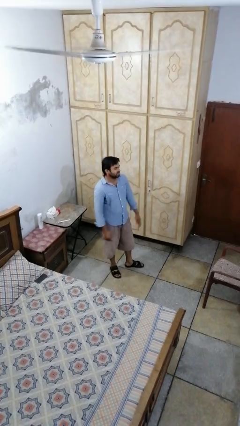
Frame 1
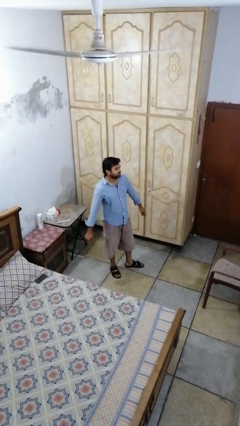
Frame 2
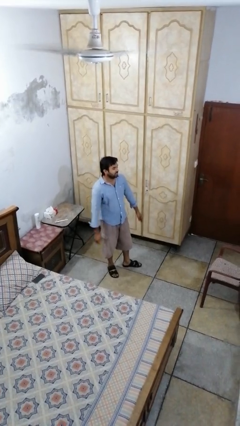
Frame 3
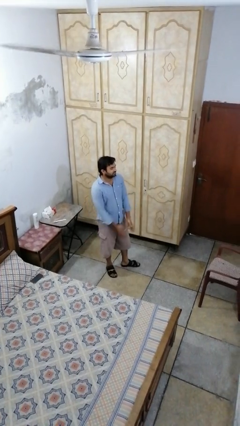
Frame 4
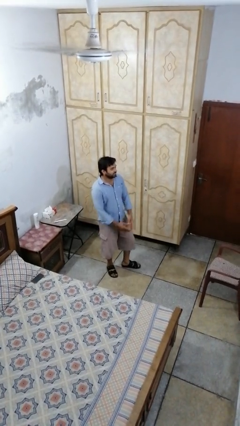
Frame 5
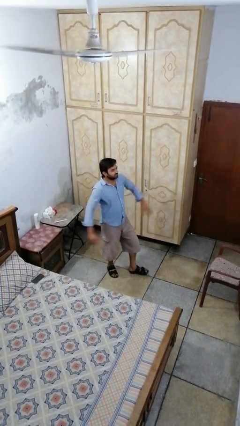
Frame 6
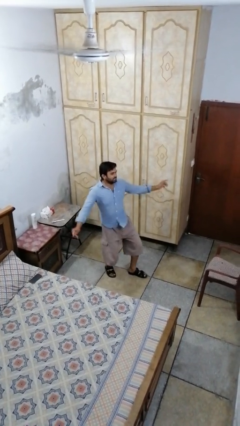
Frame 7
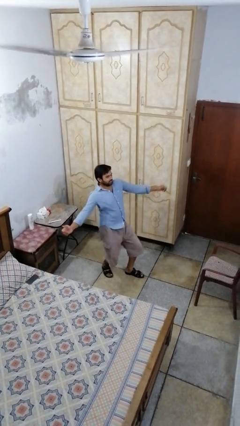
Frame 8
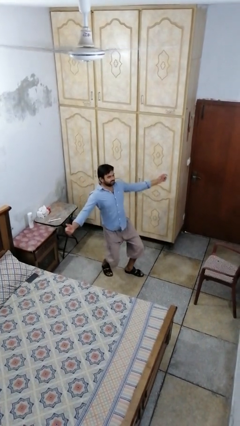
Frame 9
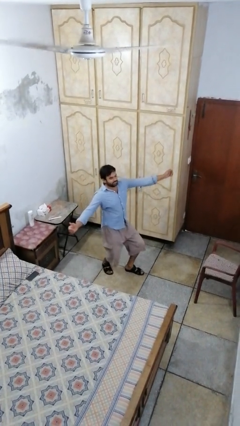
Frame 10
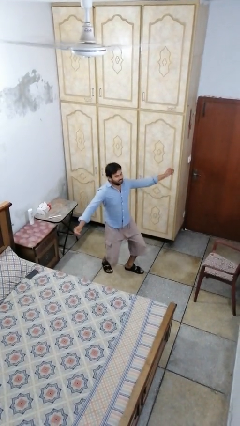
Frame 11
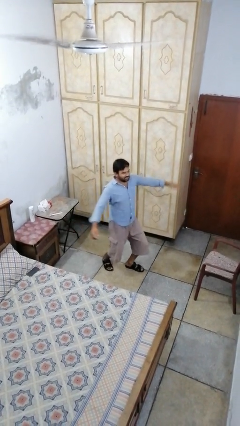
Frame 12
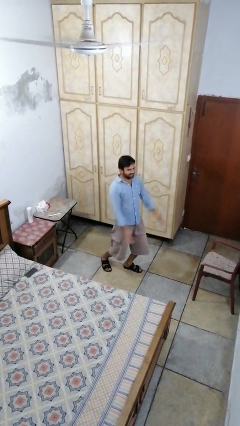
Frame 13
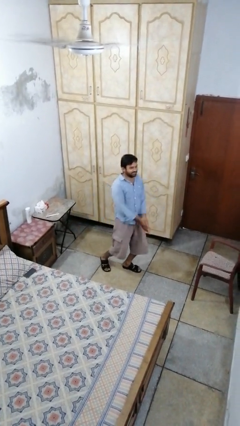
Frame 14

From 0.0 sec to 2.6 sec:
person dances in place

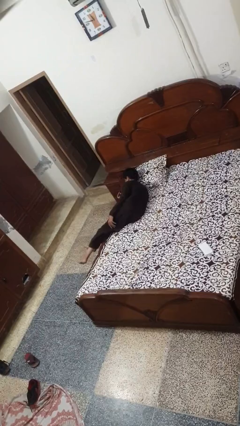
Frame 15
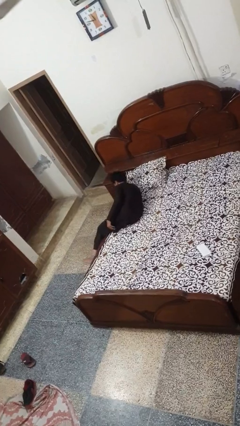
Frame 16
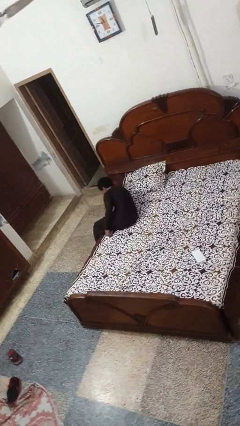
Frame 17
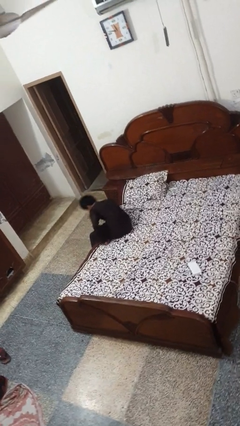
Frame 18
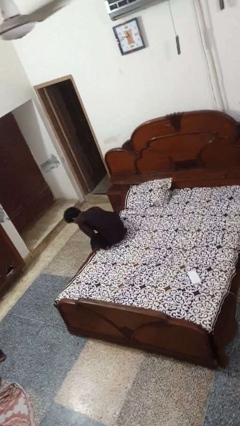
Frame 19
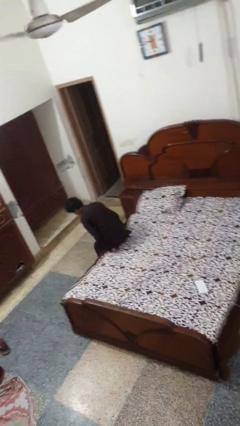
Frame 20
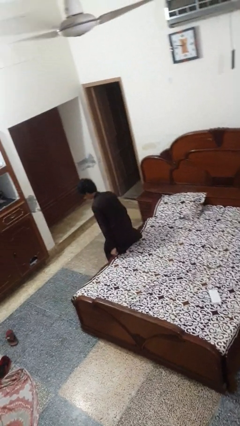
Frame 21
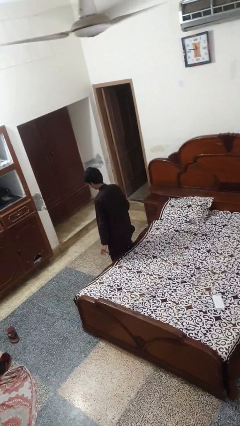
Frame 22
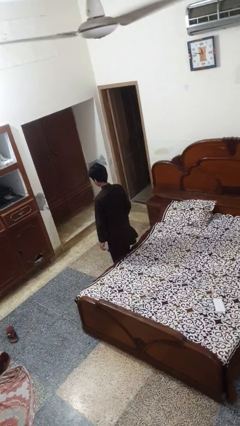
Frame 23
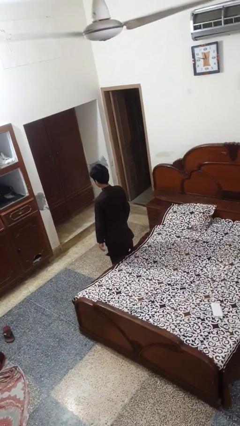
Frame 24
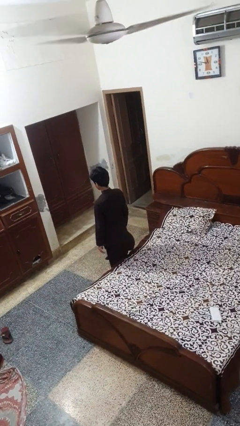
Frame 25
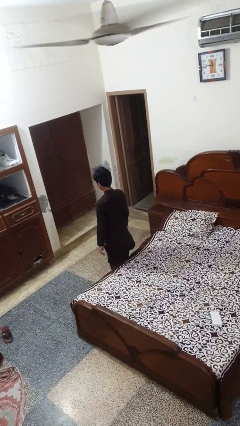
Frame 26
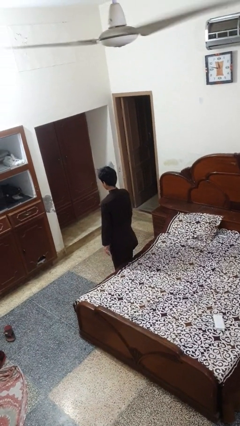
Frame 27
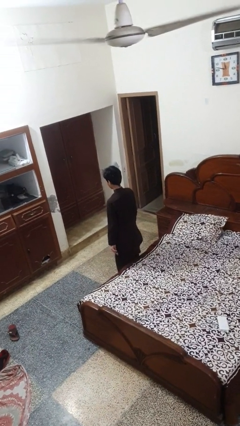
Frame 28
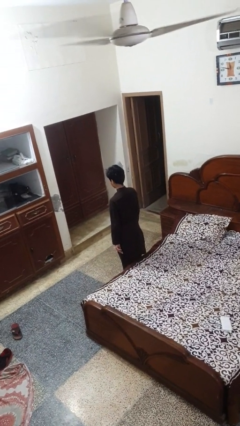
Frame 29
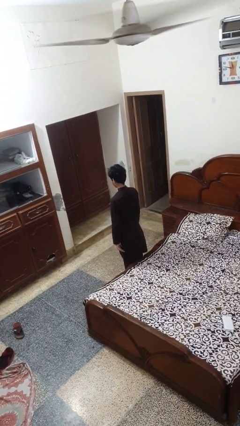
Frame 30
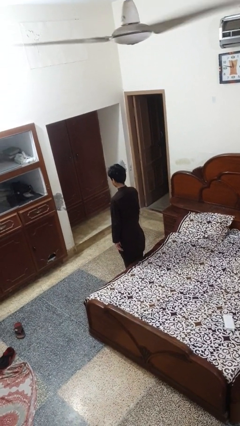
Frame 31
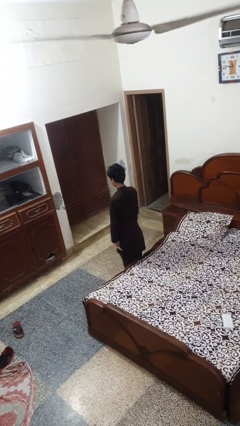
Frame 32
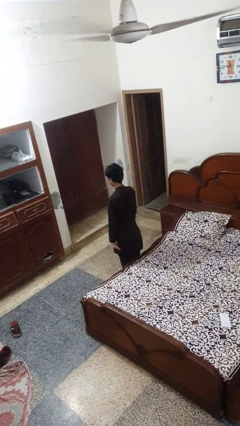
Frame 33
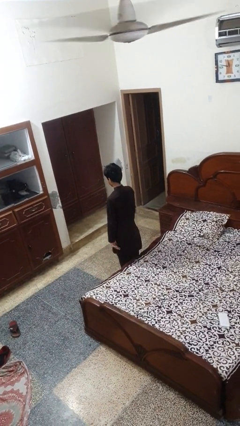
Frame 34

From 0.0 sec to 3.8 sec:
person stands up

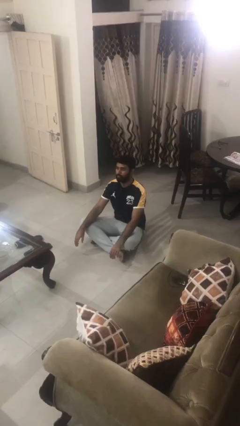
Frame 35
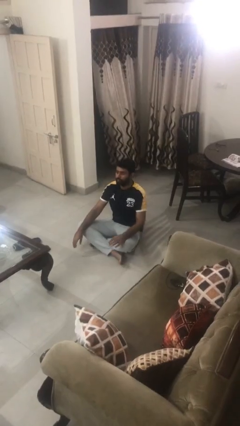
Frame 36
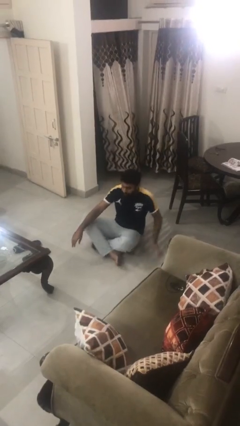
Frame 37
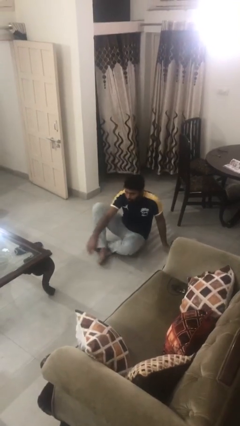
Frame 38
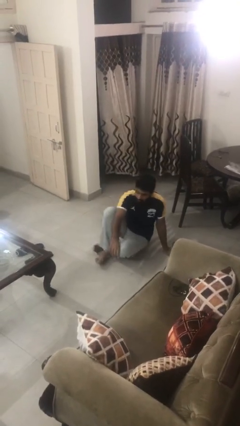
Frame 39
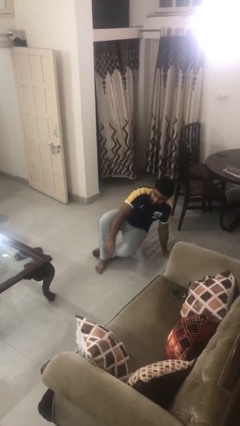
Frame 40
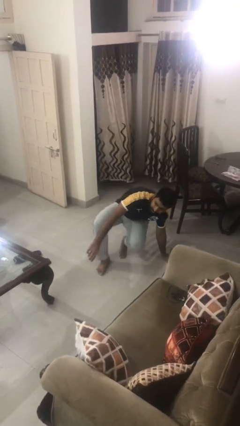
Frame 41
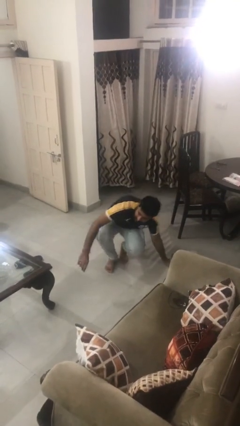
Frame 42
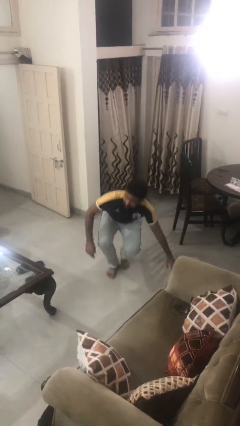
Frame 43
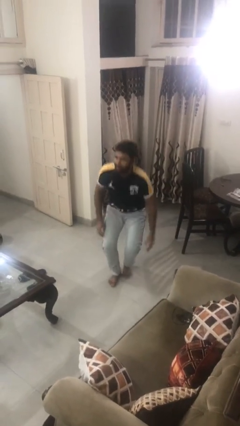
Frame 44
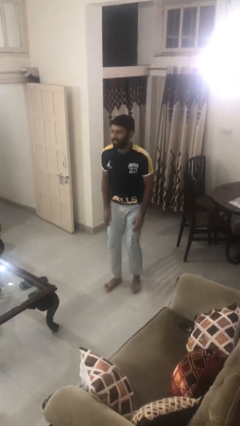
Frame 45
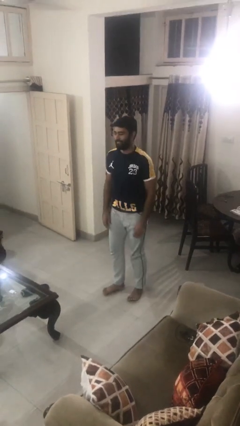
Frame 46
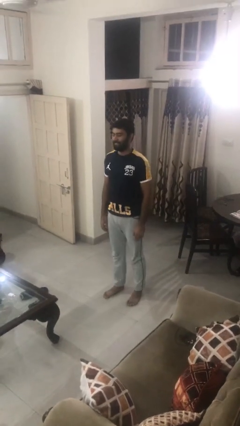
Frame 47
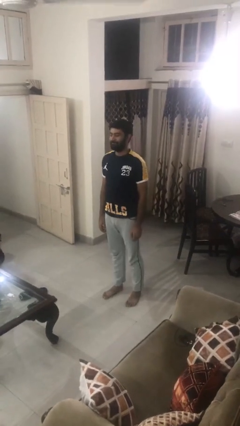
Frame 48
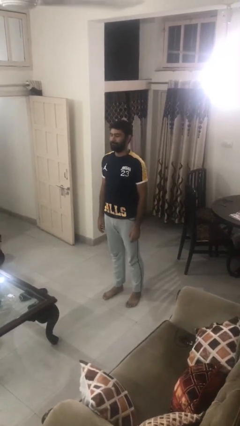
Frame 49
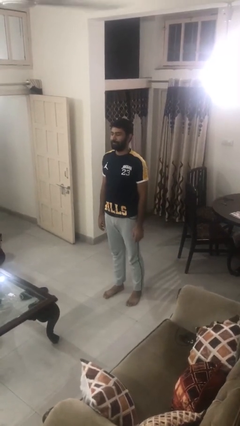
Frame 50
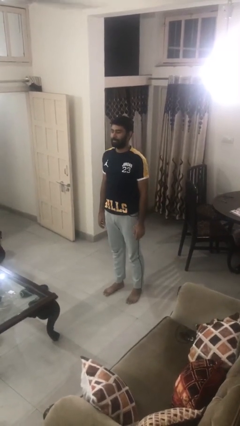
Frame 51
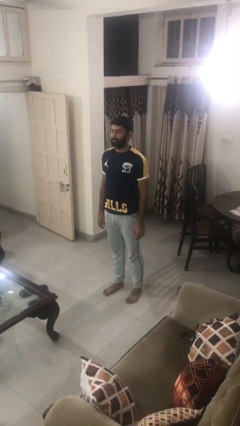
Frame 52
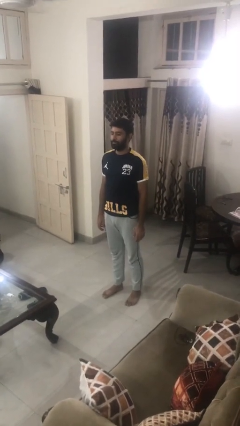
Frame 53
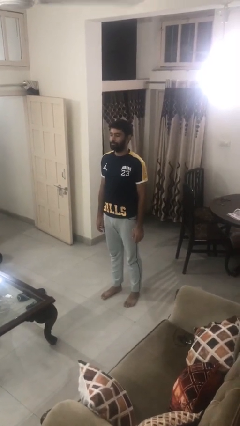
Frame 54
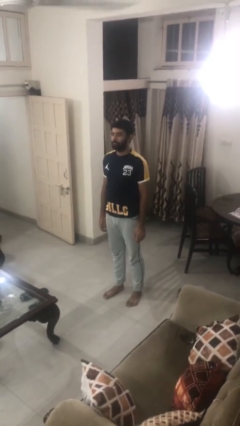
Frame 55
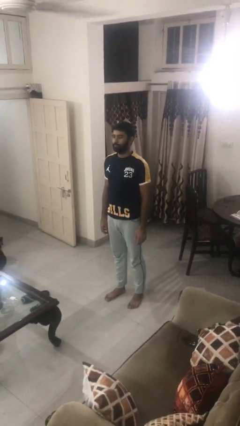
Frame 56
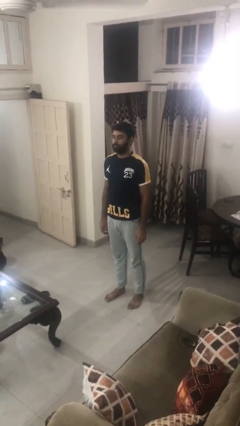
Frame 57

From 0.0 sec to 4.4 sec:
person stands up from floor

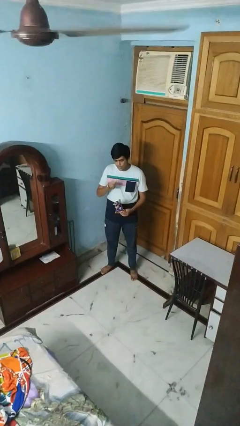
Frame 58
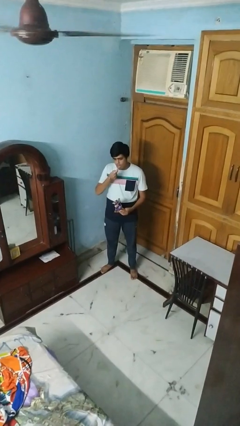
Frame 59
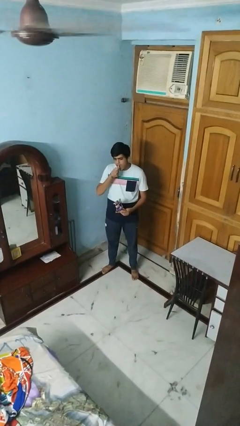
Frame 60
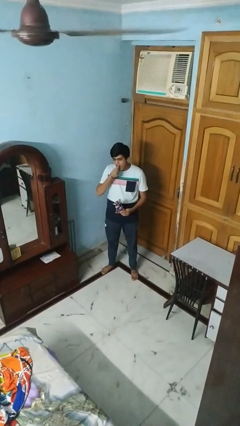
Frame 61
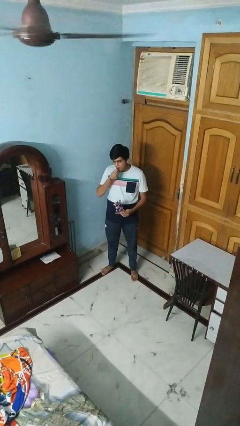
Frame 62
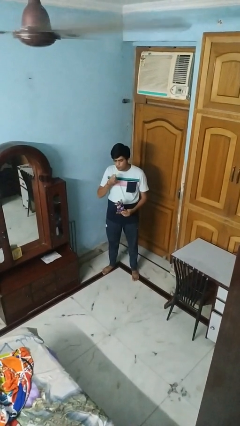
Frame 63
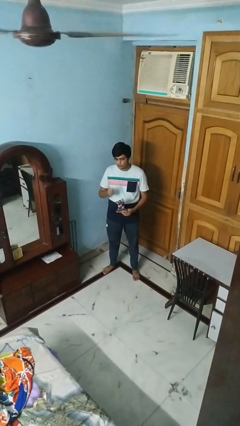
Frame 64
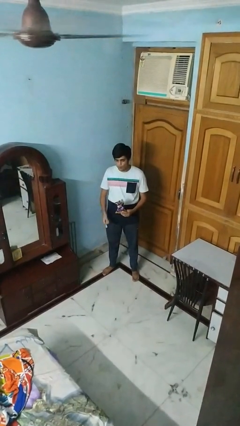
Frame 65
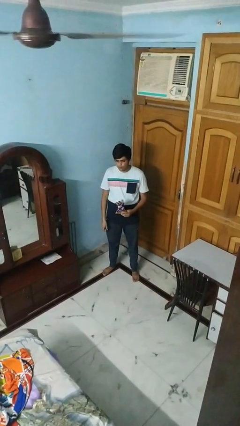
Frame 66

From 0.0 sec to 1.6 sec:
person eats snack from bag

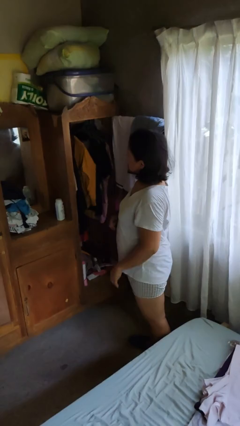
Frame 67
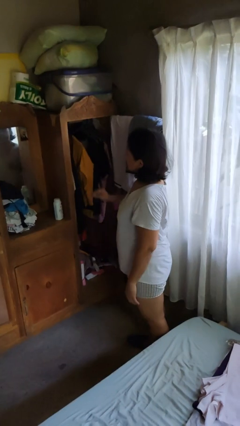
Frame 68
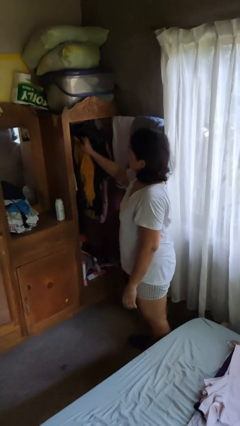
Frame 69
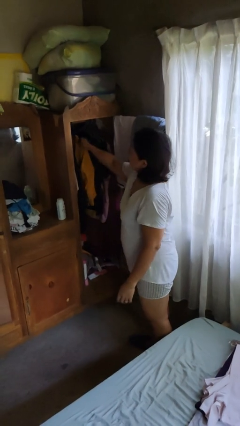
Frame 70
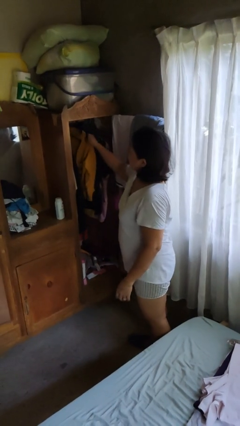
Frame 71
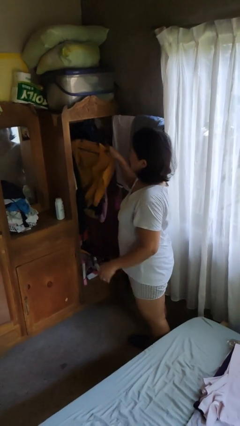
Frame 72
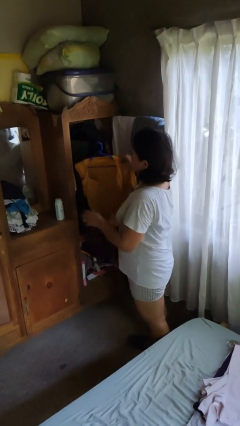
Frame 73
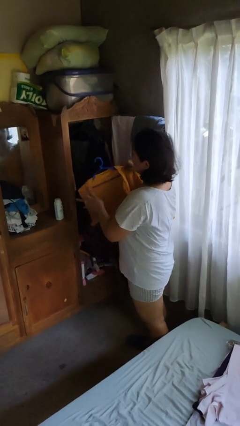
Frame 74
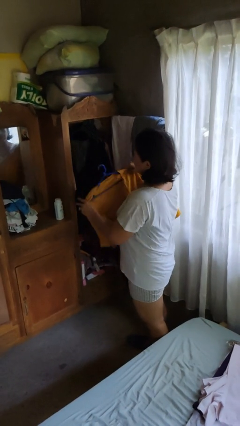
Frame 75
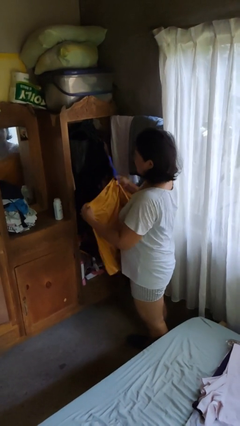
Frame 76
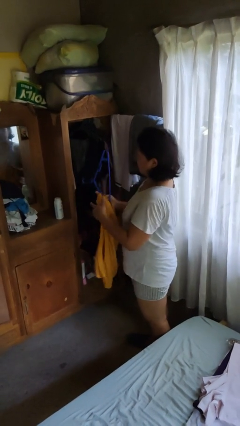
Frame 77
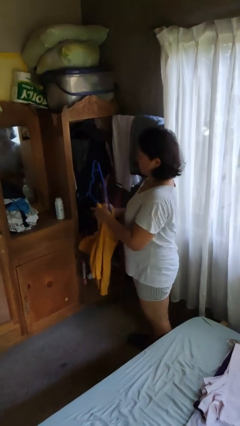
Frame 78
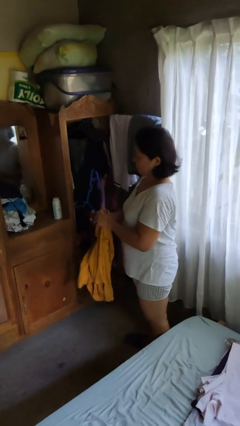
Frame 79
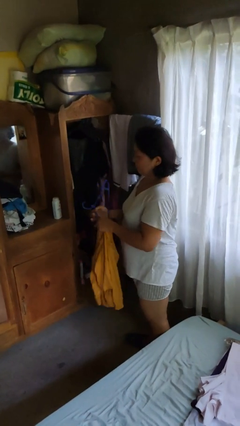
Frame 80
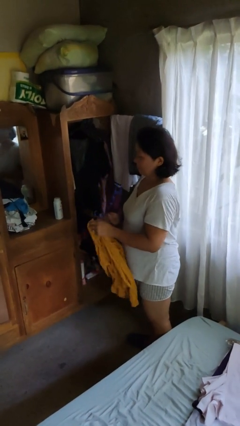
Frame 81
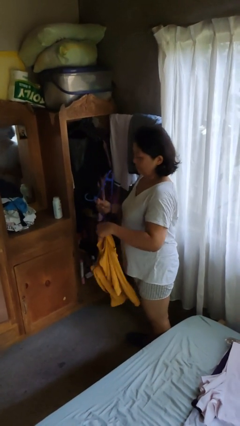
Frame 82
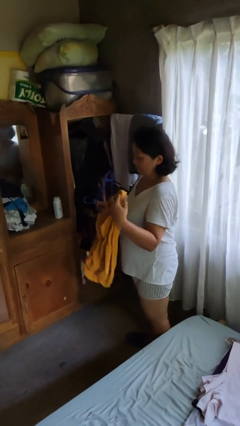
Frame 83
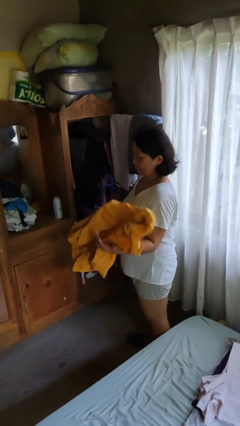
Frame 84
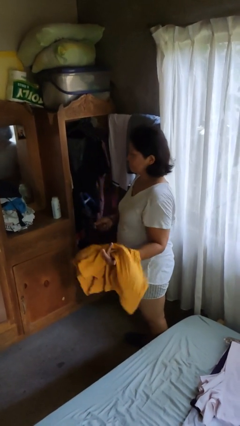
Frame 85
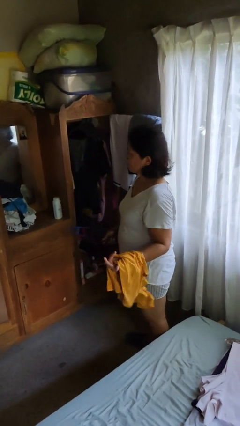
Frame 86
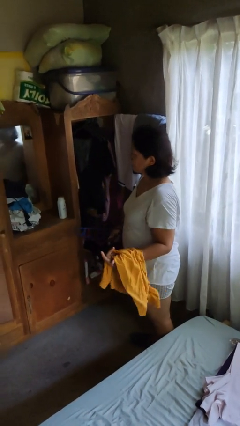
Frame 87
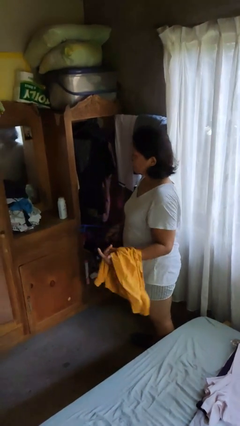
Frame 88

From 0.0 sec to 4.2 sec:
person takes clothes from closet

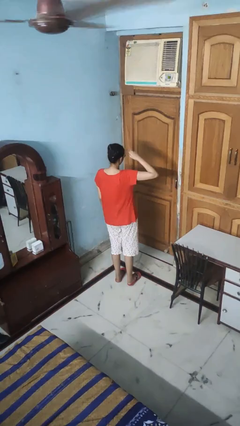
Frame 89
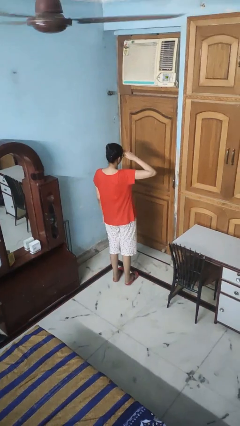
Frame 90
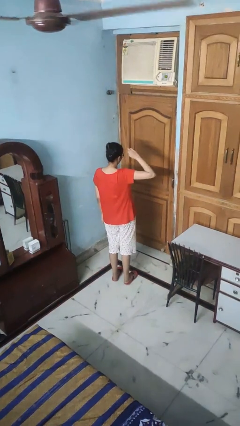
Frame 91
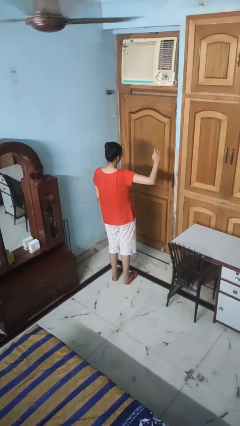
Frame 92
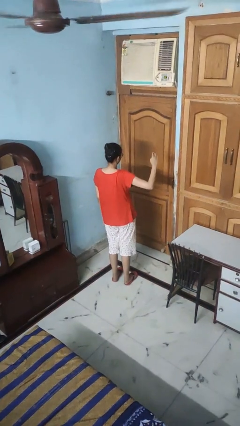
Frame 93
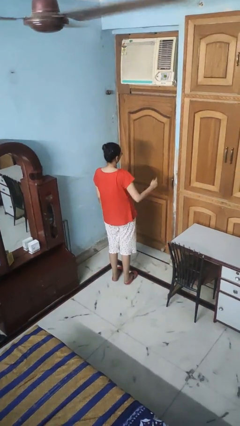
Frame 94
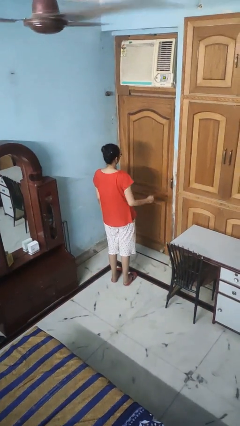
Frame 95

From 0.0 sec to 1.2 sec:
person salutes
